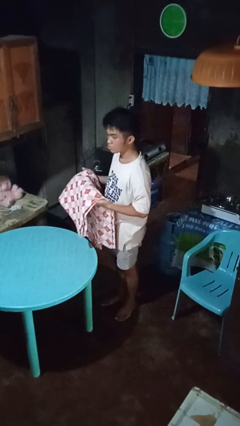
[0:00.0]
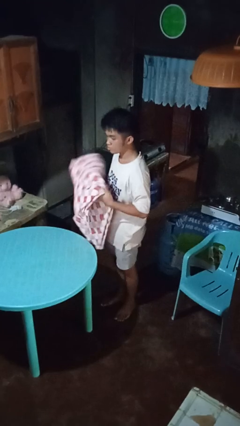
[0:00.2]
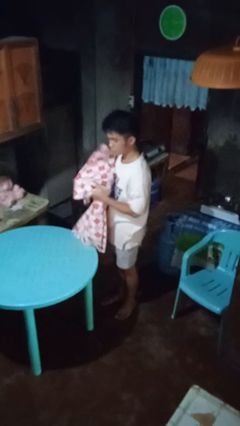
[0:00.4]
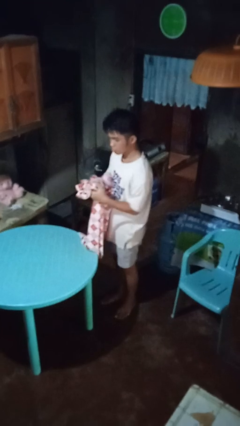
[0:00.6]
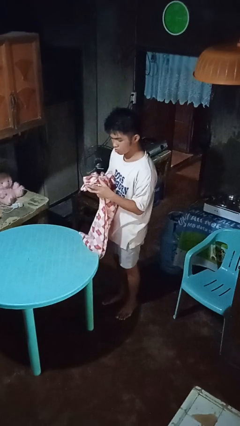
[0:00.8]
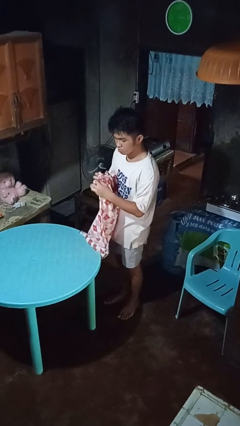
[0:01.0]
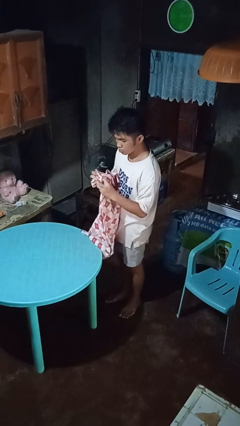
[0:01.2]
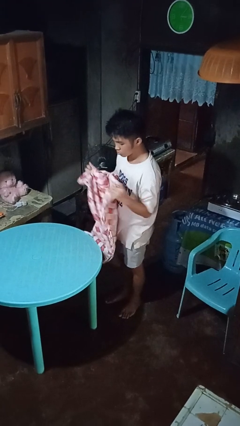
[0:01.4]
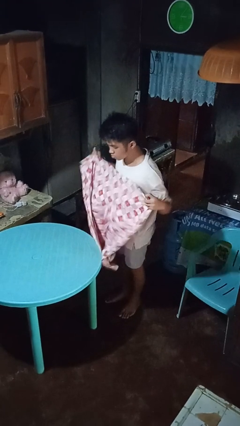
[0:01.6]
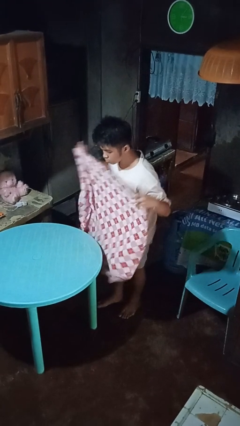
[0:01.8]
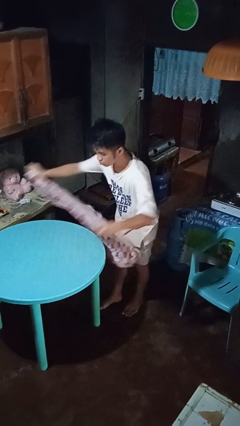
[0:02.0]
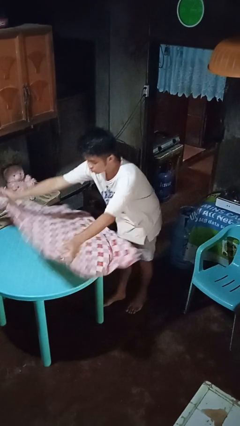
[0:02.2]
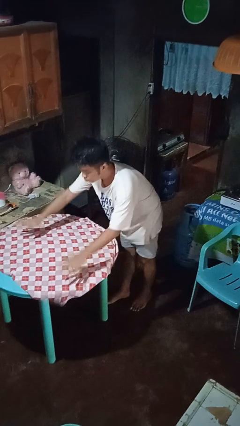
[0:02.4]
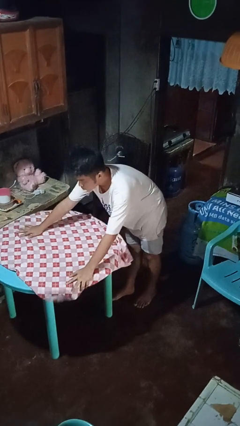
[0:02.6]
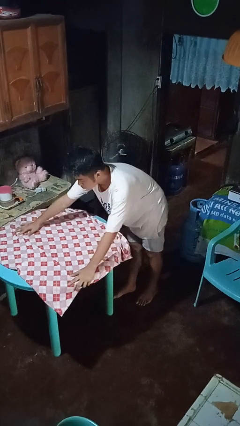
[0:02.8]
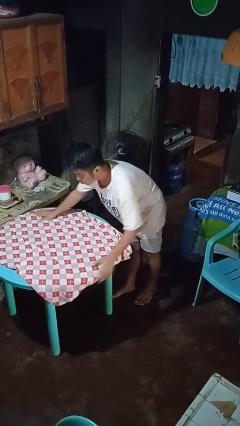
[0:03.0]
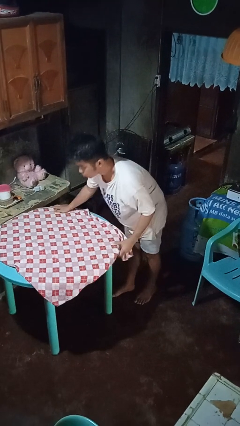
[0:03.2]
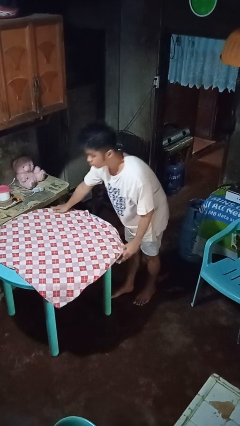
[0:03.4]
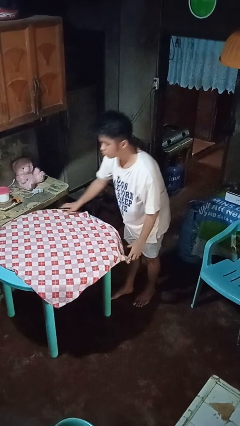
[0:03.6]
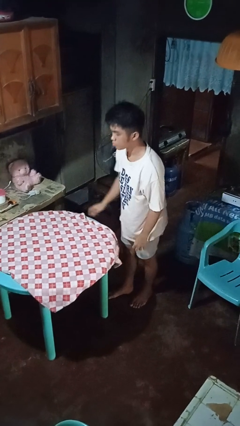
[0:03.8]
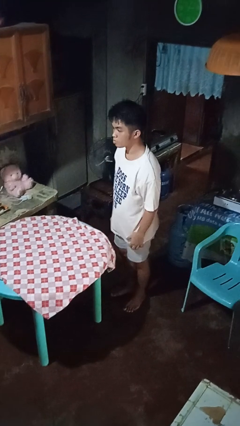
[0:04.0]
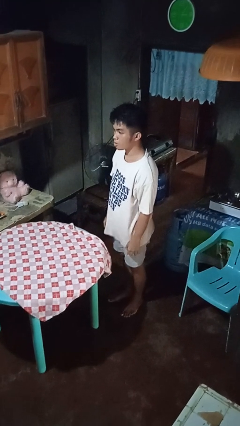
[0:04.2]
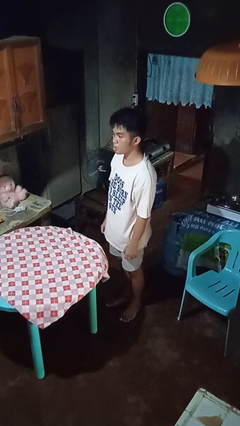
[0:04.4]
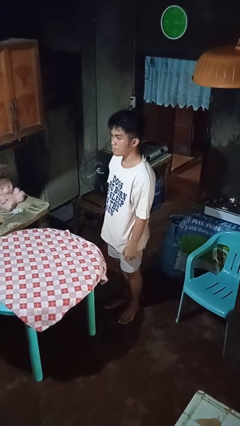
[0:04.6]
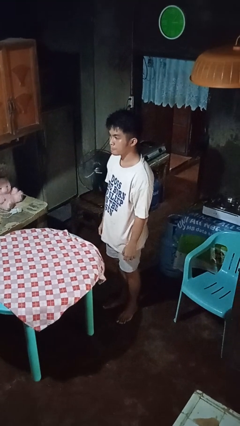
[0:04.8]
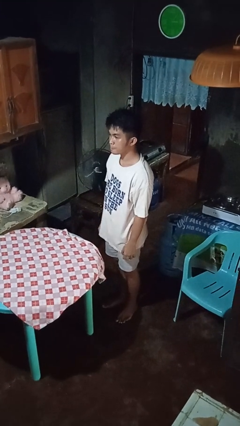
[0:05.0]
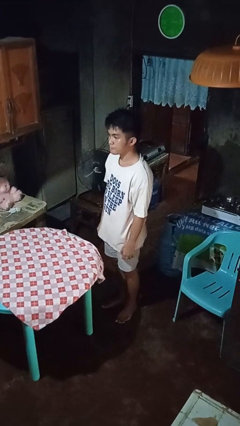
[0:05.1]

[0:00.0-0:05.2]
person spreads tablecloth

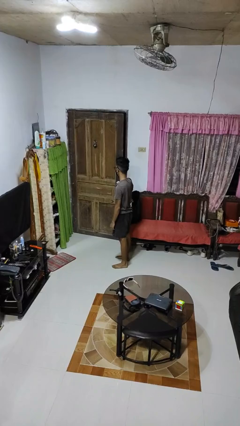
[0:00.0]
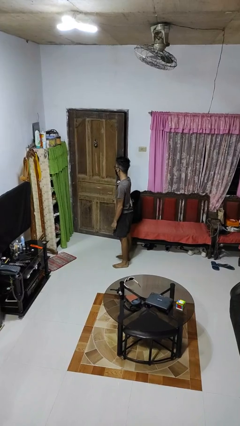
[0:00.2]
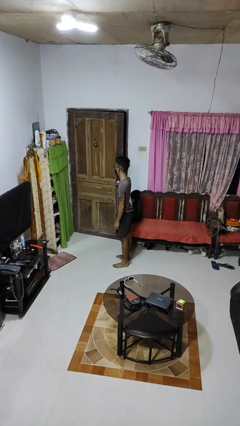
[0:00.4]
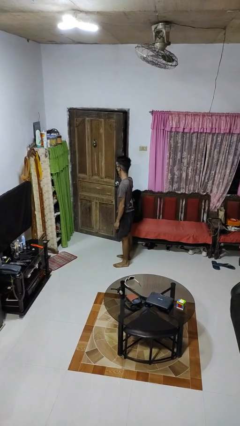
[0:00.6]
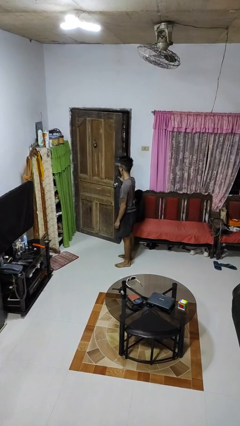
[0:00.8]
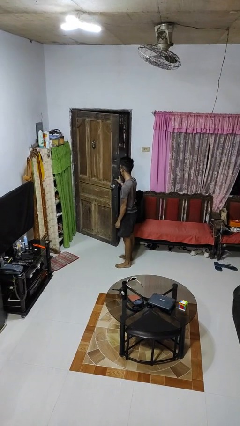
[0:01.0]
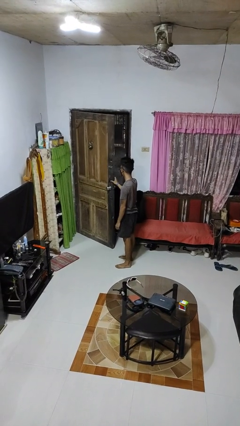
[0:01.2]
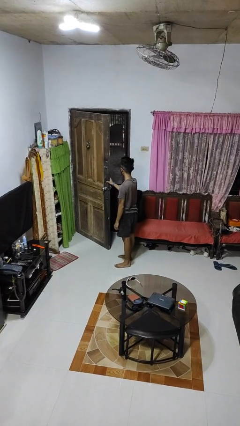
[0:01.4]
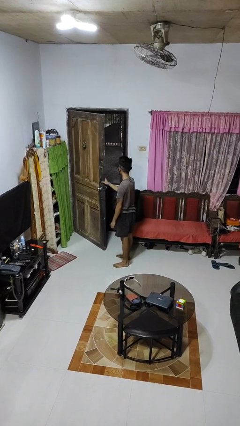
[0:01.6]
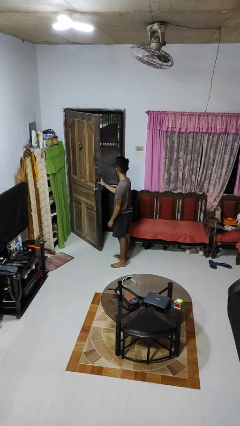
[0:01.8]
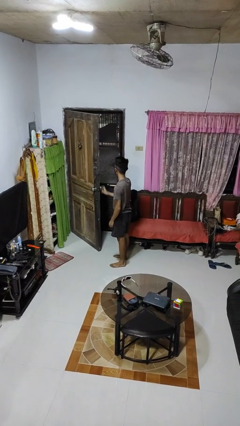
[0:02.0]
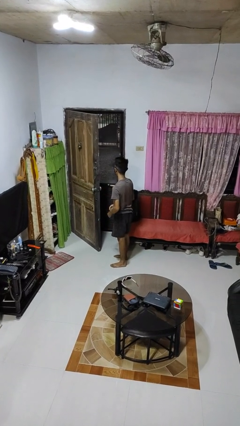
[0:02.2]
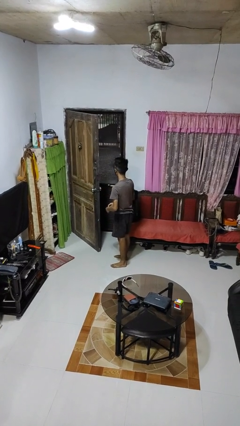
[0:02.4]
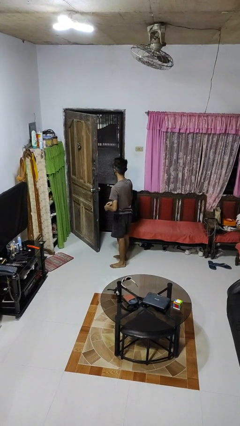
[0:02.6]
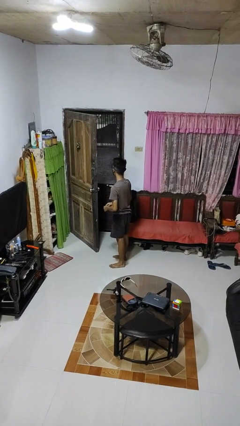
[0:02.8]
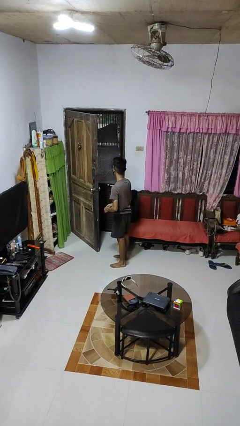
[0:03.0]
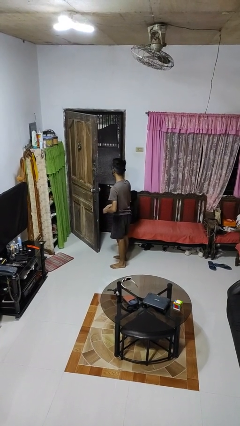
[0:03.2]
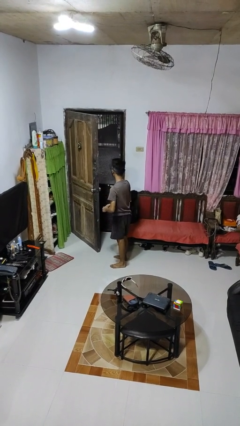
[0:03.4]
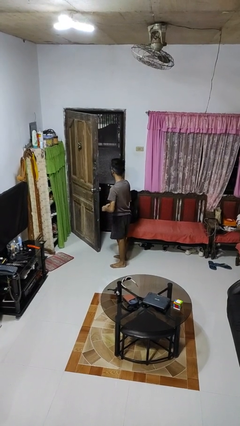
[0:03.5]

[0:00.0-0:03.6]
person opens facility door

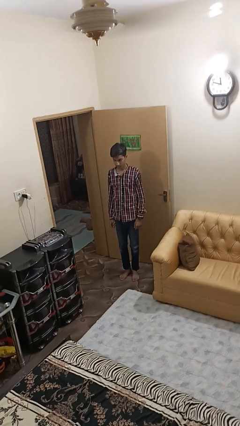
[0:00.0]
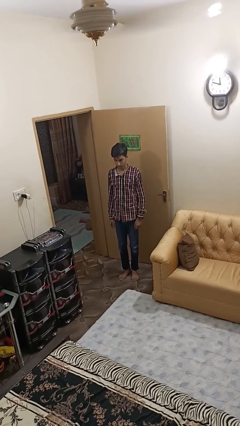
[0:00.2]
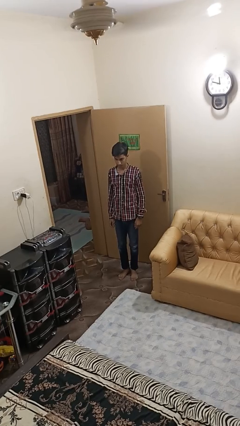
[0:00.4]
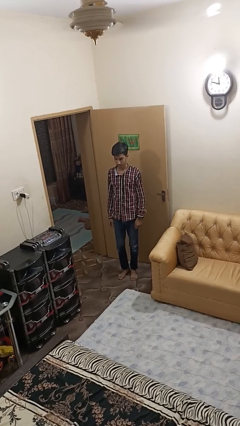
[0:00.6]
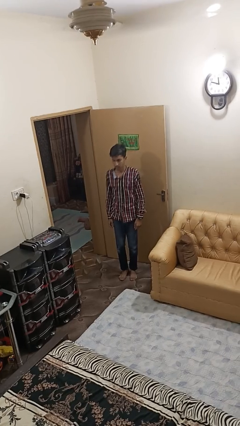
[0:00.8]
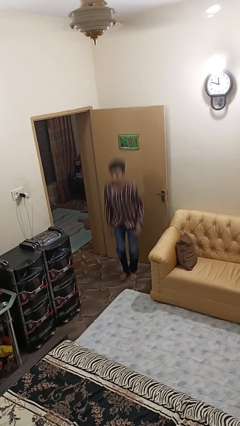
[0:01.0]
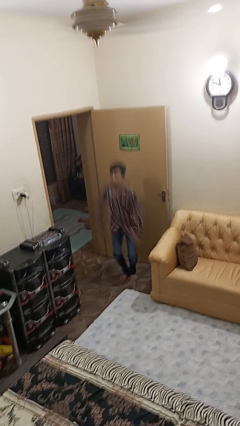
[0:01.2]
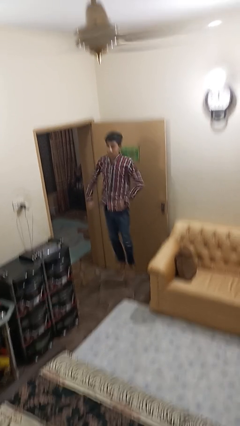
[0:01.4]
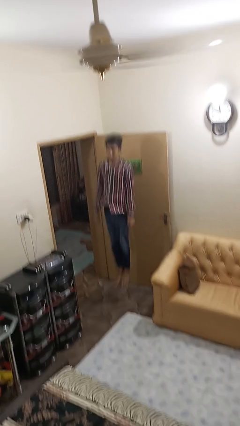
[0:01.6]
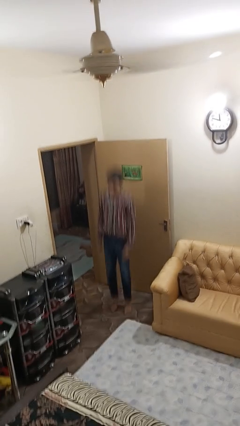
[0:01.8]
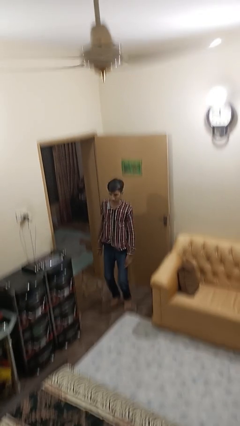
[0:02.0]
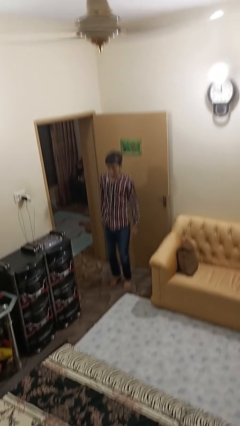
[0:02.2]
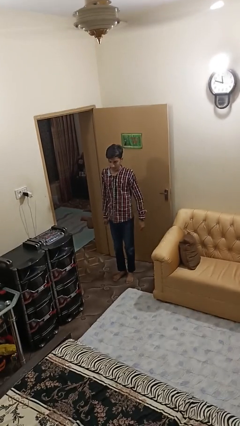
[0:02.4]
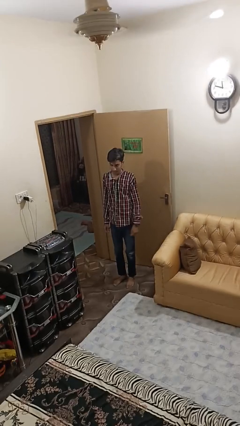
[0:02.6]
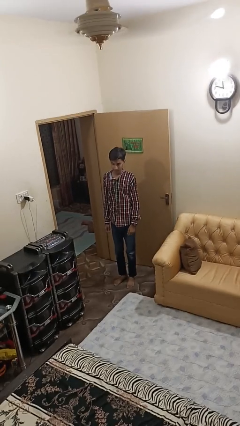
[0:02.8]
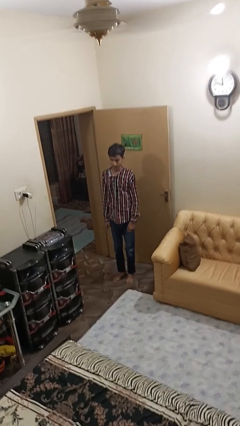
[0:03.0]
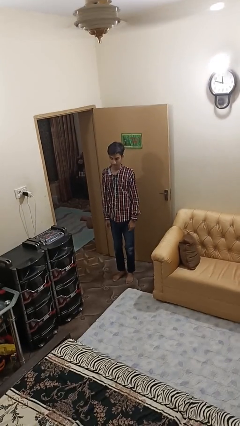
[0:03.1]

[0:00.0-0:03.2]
person jumps

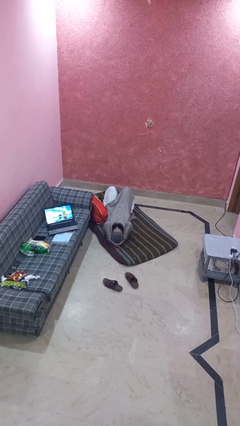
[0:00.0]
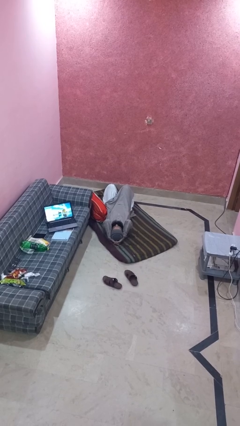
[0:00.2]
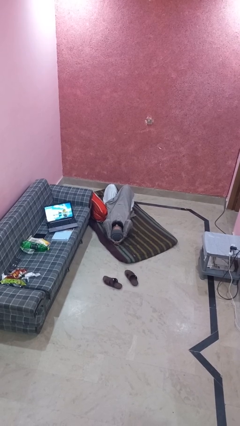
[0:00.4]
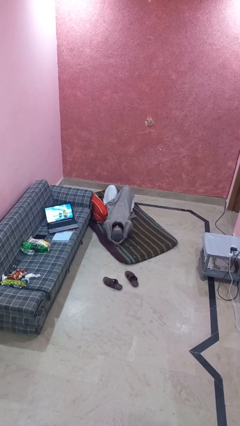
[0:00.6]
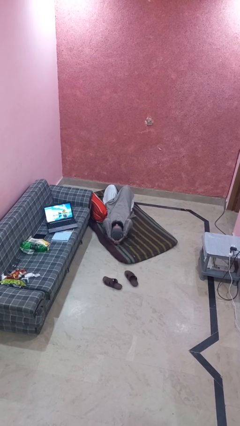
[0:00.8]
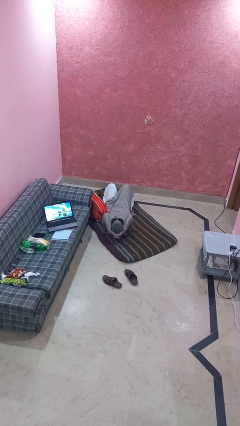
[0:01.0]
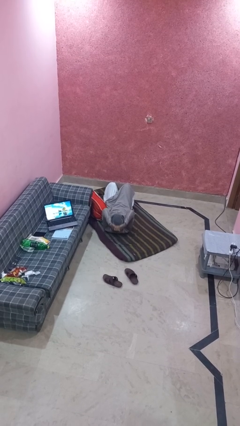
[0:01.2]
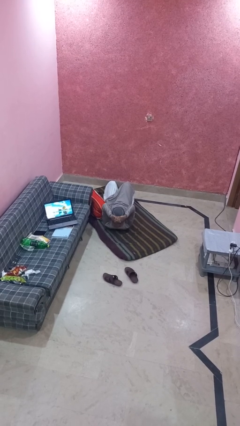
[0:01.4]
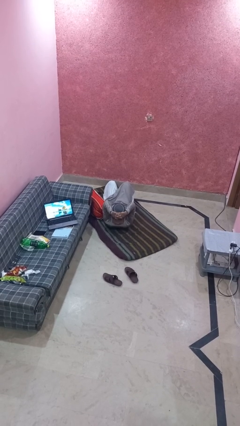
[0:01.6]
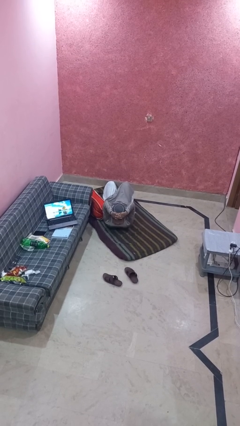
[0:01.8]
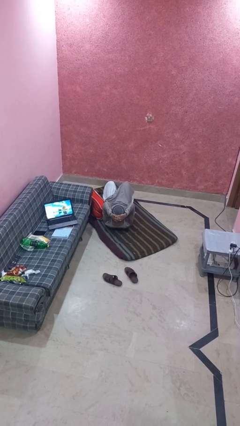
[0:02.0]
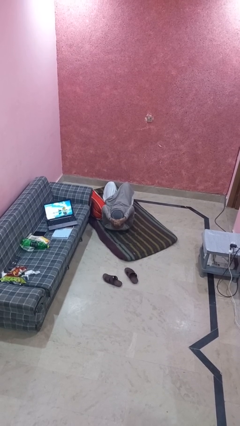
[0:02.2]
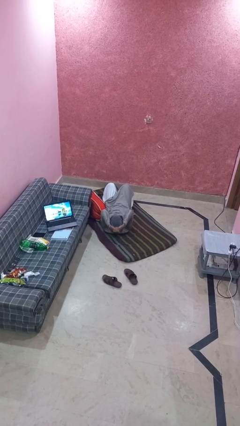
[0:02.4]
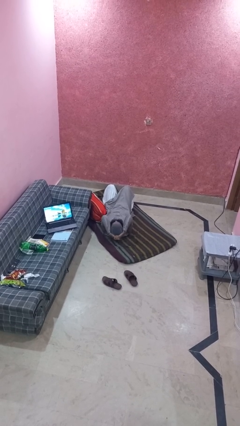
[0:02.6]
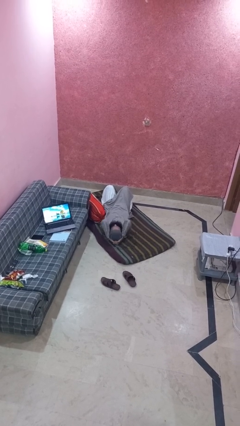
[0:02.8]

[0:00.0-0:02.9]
person exercises with situp

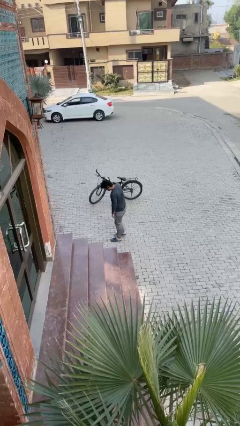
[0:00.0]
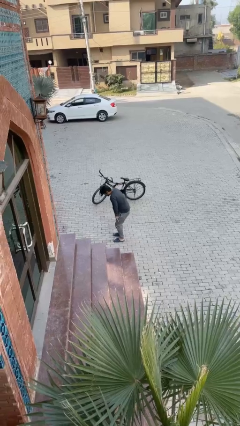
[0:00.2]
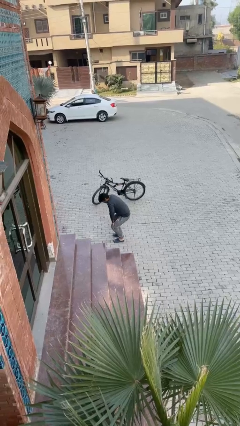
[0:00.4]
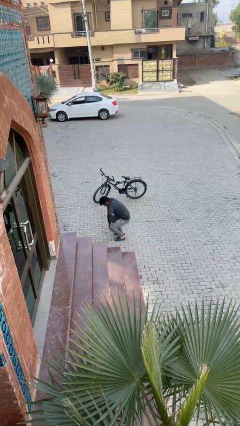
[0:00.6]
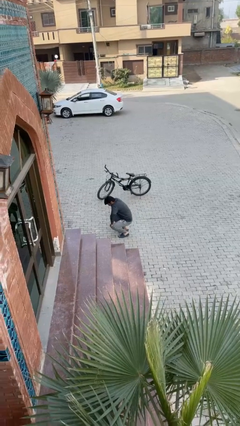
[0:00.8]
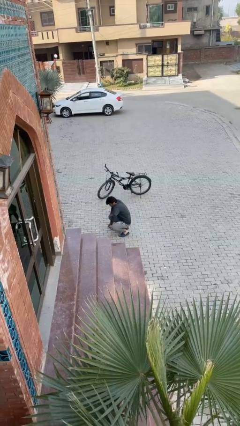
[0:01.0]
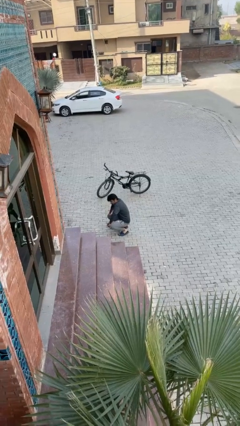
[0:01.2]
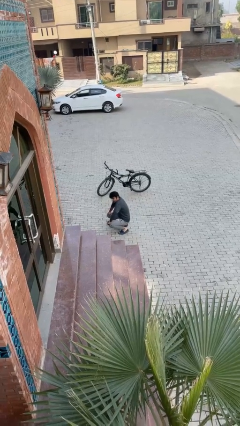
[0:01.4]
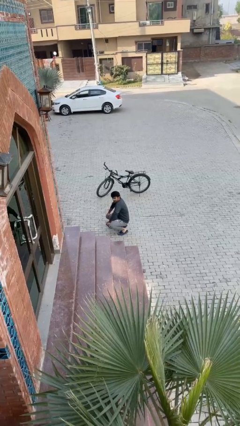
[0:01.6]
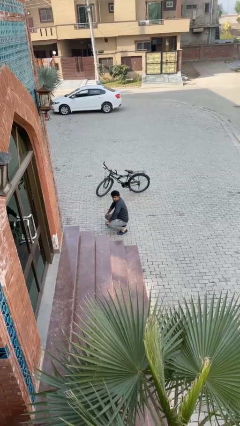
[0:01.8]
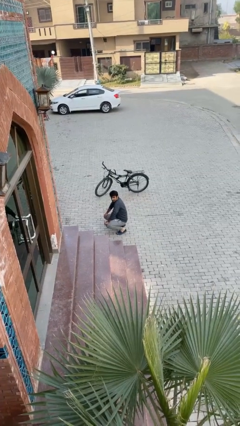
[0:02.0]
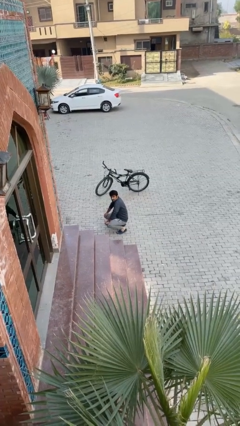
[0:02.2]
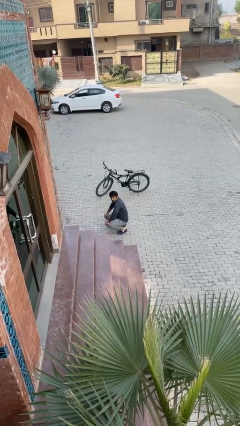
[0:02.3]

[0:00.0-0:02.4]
person sits down

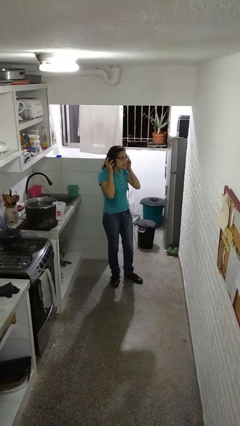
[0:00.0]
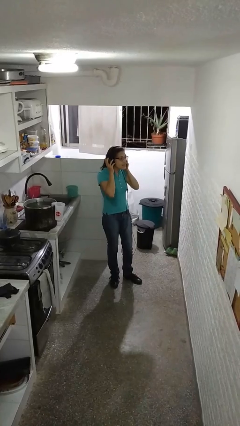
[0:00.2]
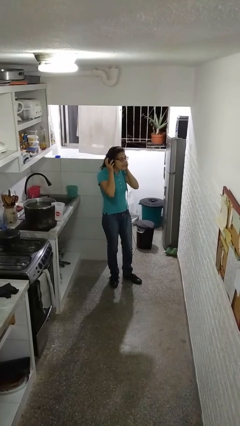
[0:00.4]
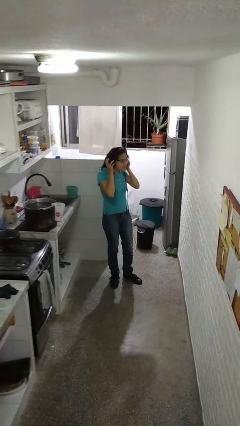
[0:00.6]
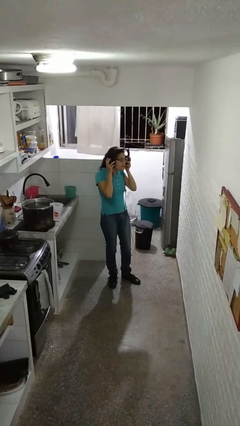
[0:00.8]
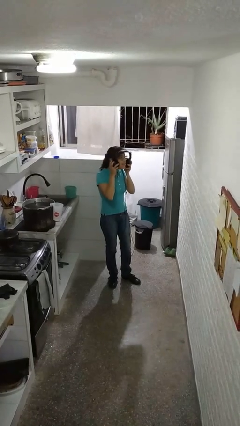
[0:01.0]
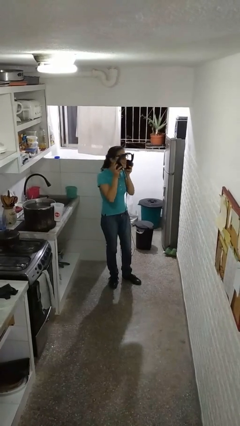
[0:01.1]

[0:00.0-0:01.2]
person takes off headphones
